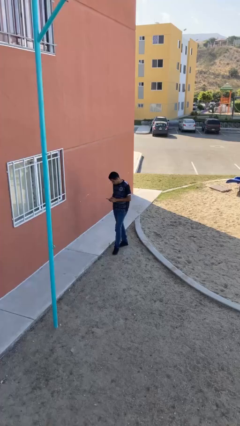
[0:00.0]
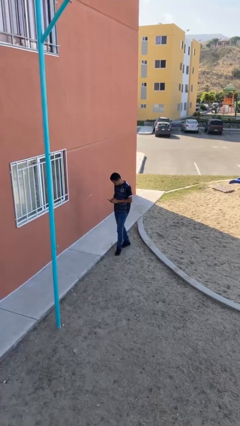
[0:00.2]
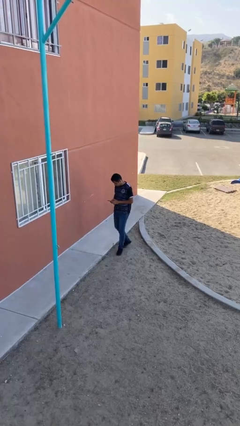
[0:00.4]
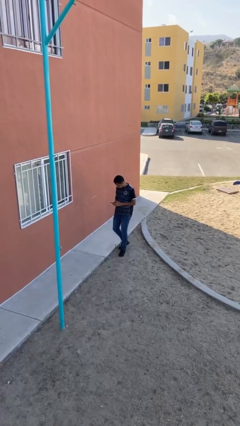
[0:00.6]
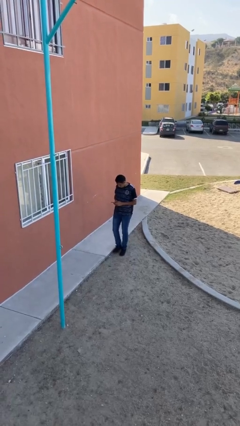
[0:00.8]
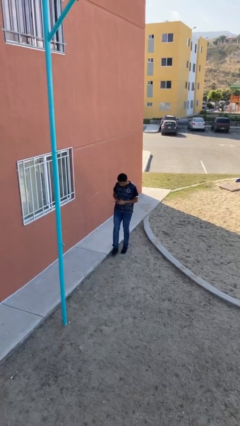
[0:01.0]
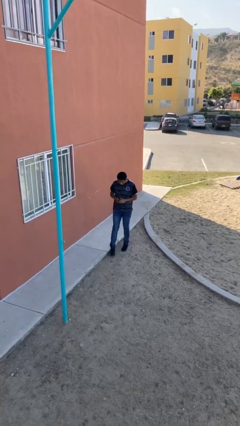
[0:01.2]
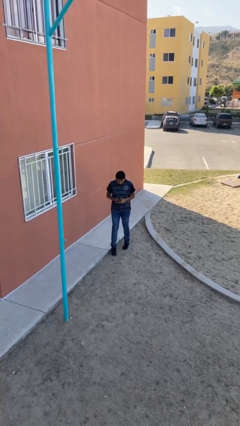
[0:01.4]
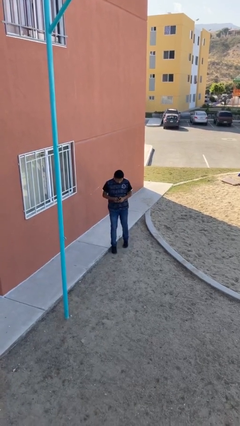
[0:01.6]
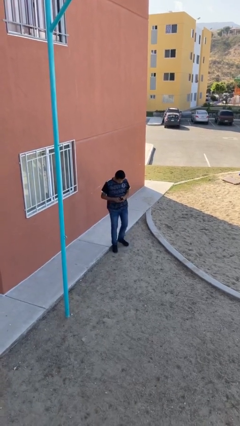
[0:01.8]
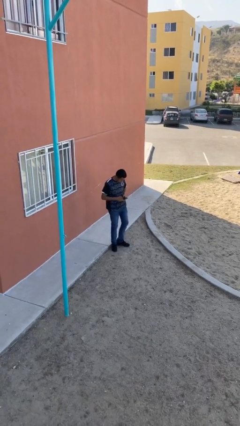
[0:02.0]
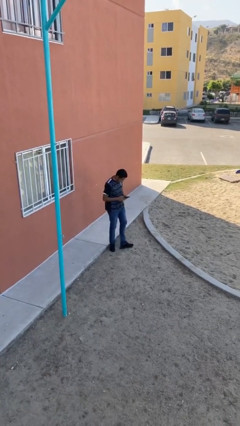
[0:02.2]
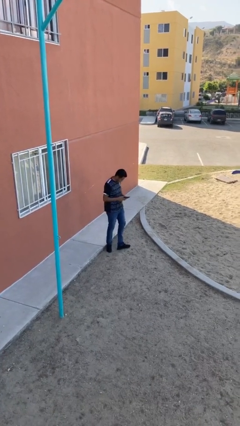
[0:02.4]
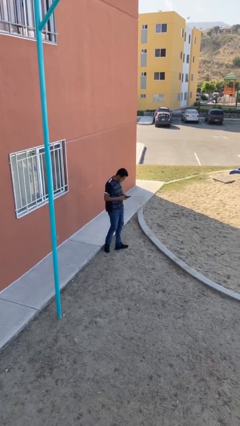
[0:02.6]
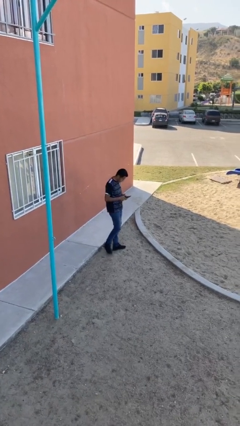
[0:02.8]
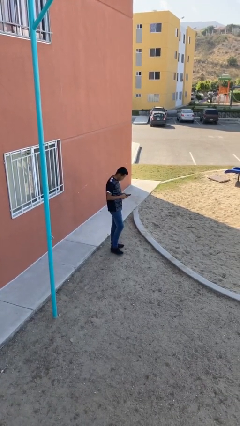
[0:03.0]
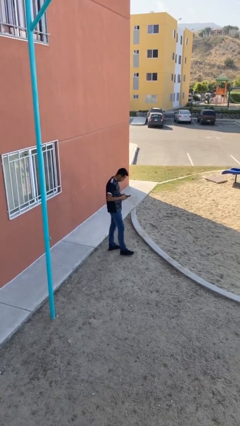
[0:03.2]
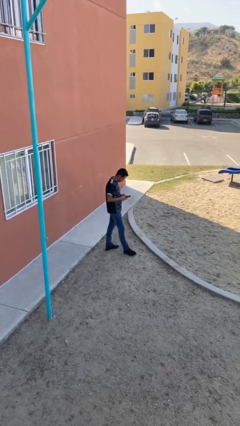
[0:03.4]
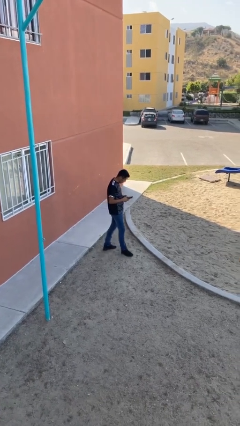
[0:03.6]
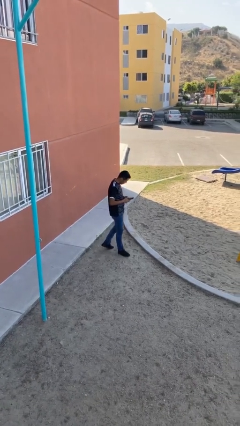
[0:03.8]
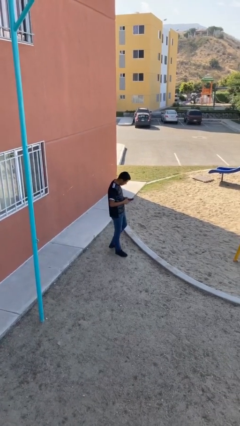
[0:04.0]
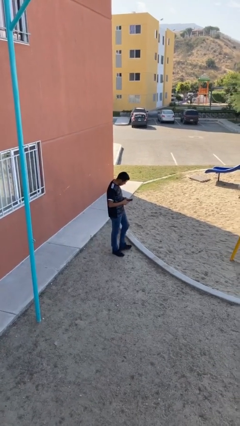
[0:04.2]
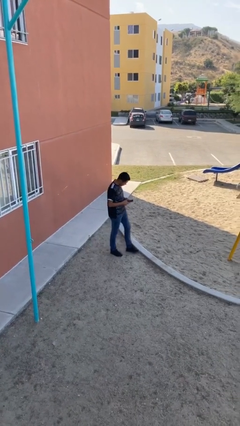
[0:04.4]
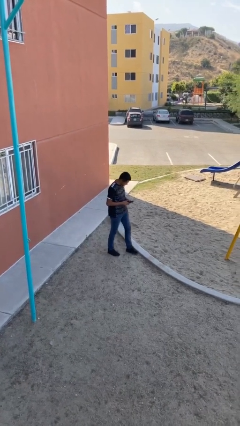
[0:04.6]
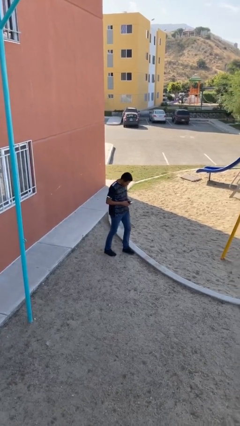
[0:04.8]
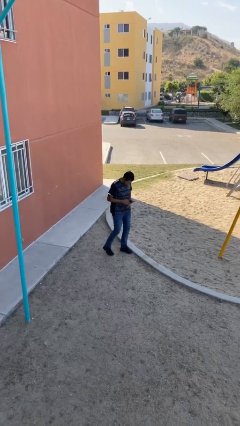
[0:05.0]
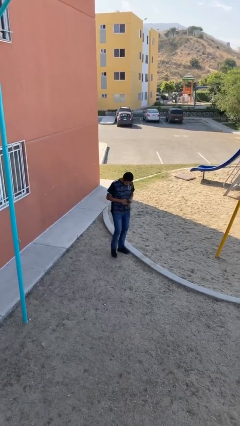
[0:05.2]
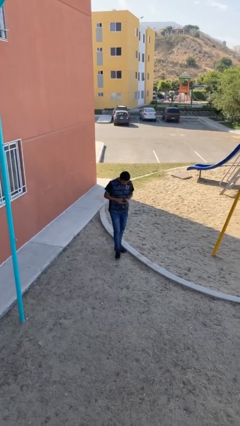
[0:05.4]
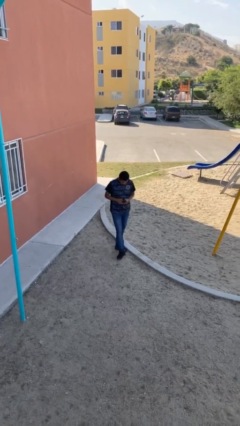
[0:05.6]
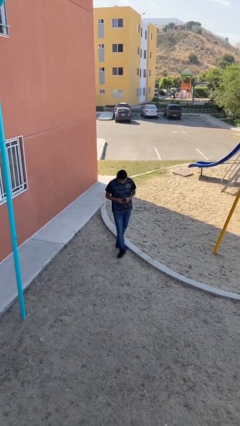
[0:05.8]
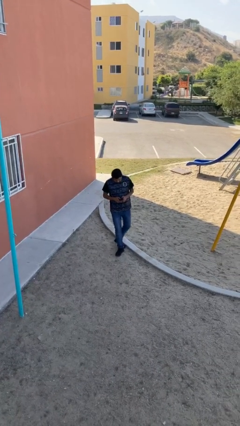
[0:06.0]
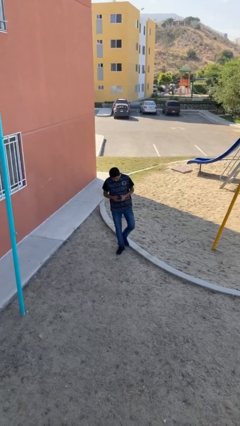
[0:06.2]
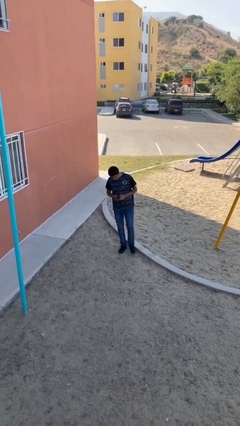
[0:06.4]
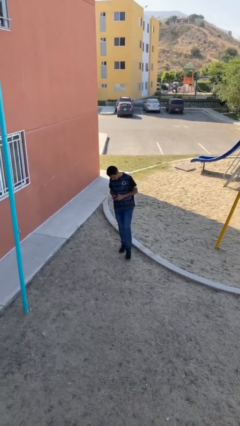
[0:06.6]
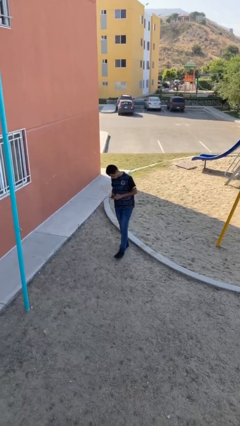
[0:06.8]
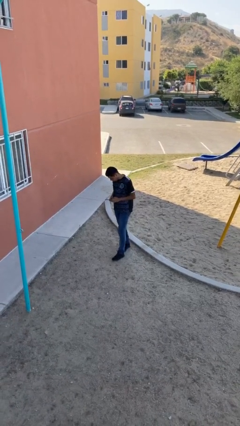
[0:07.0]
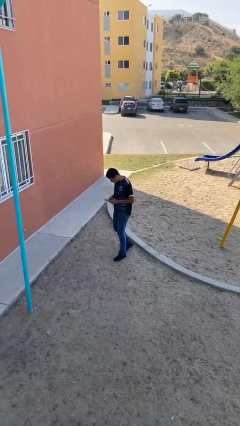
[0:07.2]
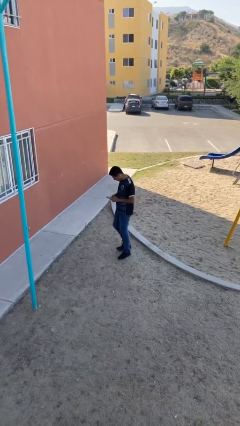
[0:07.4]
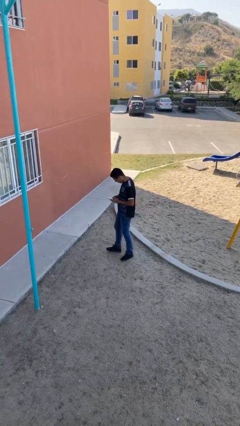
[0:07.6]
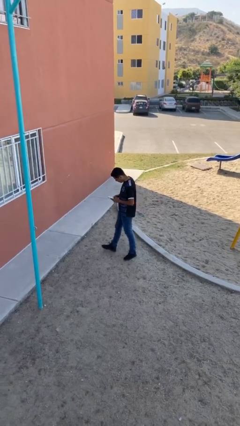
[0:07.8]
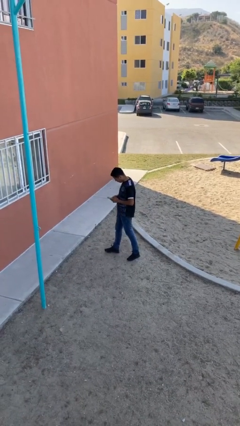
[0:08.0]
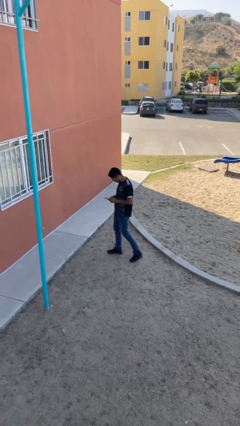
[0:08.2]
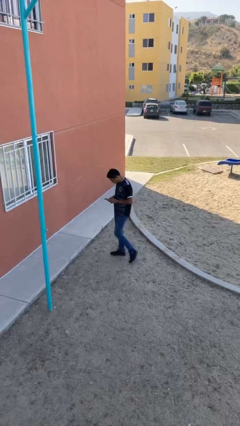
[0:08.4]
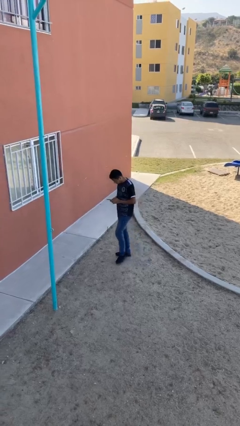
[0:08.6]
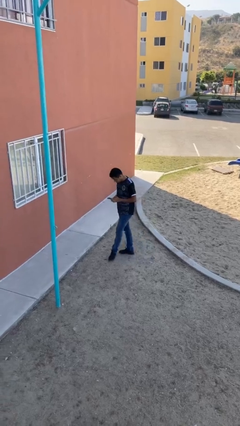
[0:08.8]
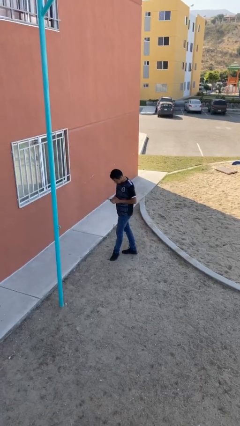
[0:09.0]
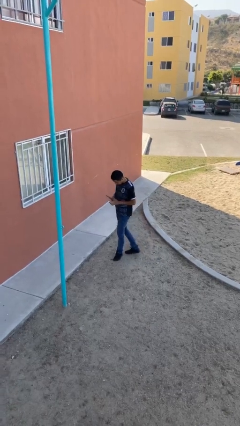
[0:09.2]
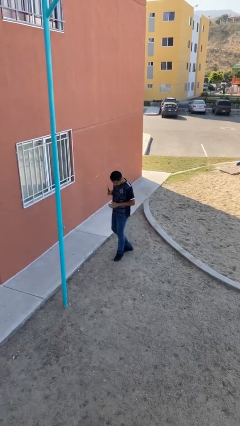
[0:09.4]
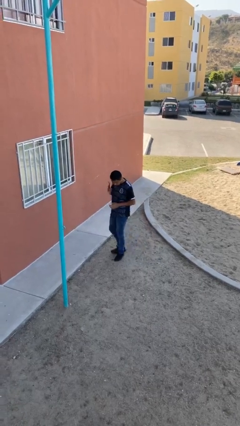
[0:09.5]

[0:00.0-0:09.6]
person texts on phone

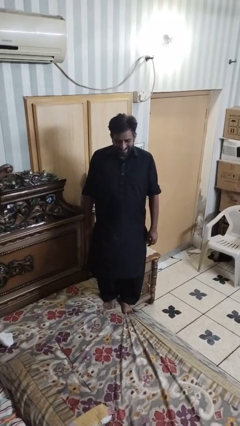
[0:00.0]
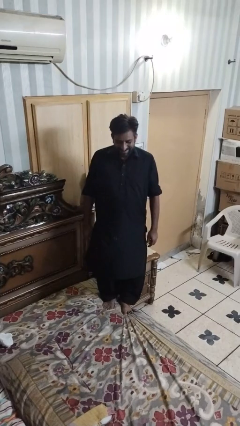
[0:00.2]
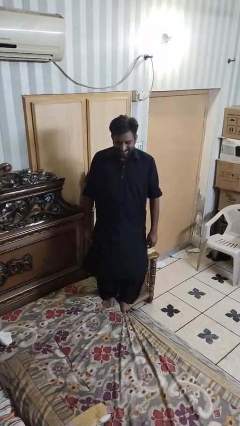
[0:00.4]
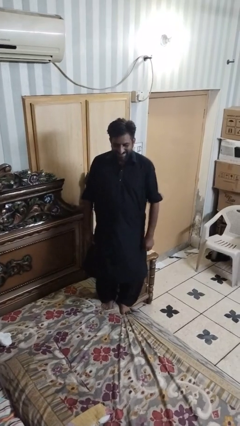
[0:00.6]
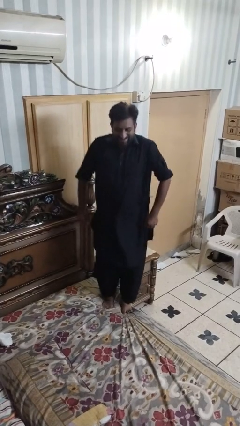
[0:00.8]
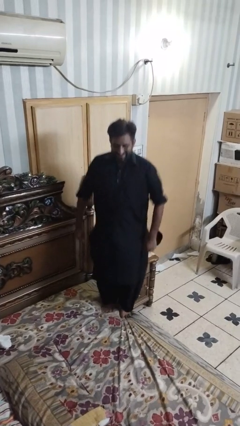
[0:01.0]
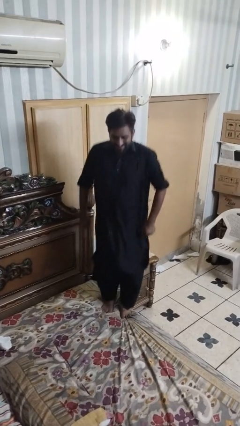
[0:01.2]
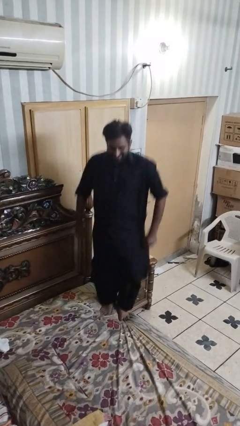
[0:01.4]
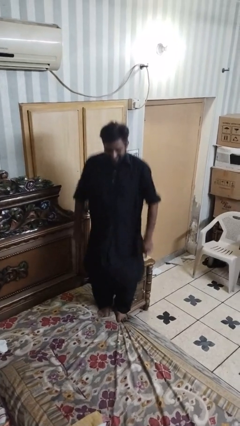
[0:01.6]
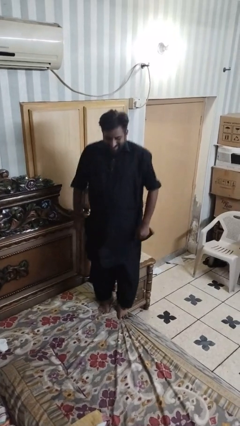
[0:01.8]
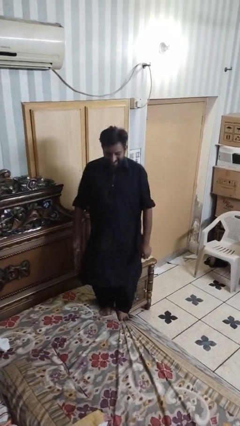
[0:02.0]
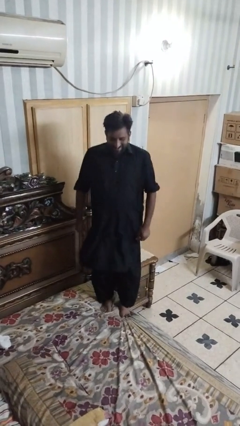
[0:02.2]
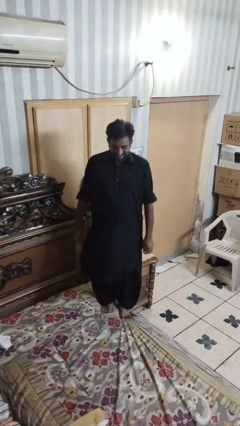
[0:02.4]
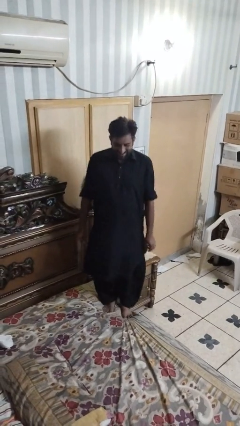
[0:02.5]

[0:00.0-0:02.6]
person jumps on bed

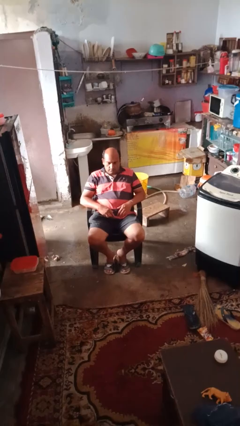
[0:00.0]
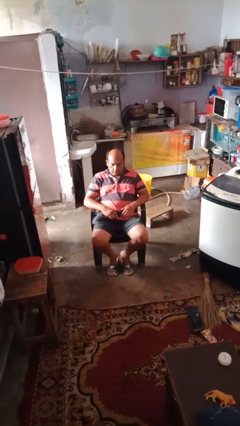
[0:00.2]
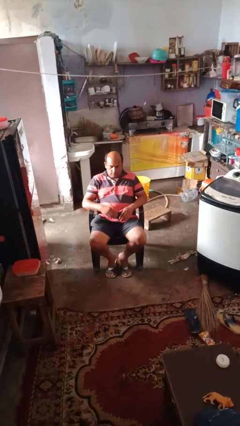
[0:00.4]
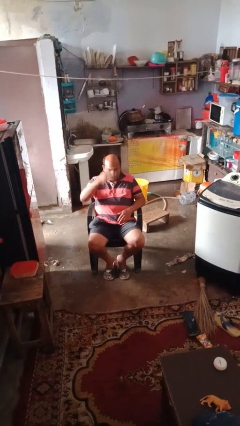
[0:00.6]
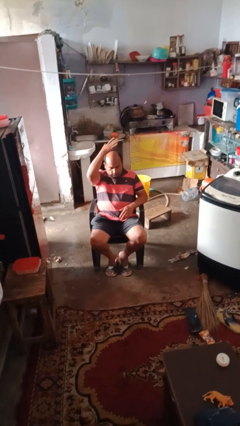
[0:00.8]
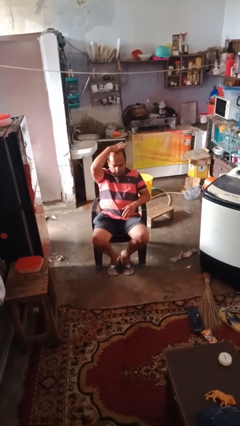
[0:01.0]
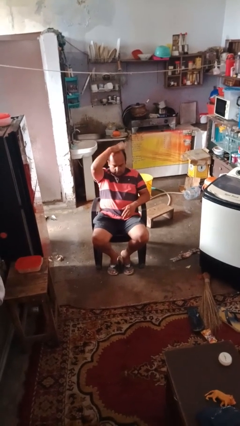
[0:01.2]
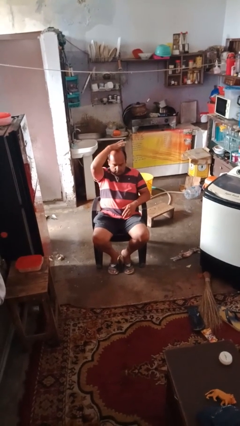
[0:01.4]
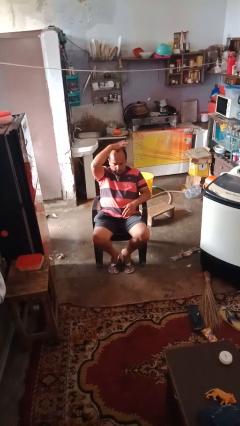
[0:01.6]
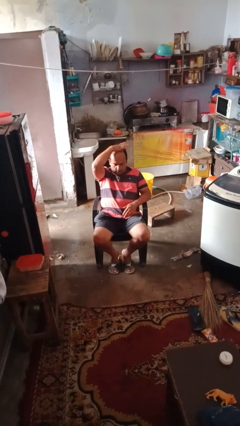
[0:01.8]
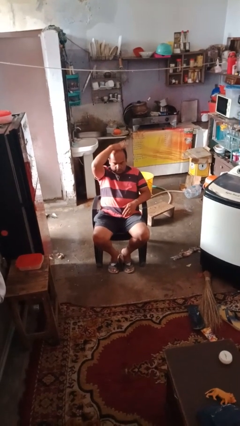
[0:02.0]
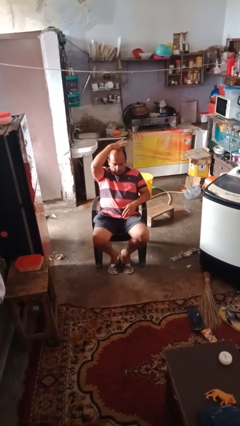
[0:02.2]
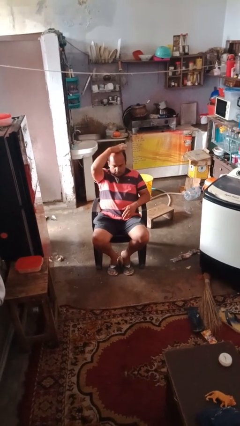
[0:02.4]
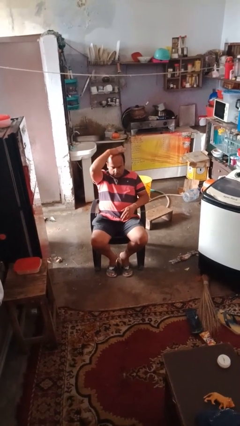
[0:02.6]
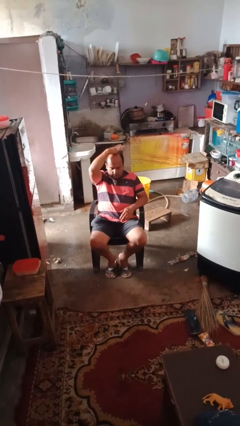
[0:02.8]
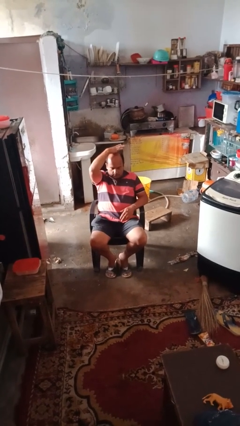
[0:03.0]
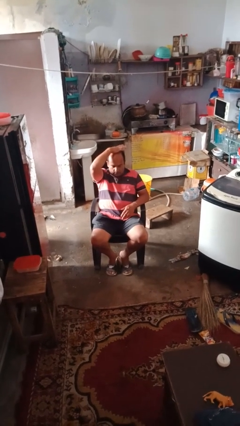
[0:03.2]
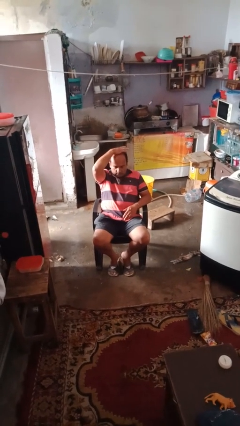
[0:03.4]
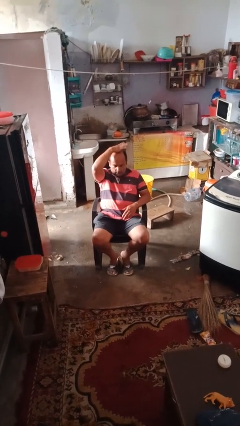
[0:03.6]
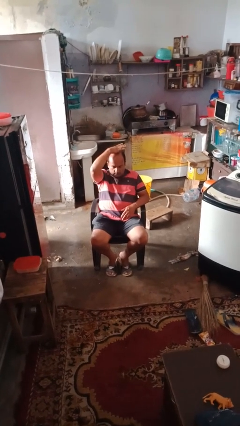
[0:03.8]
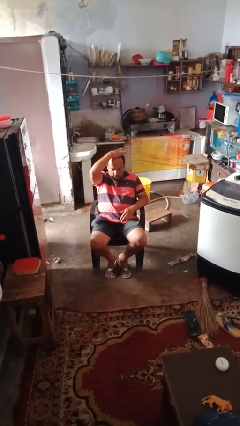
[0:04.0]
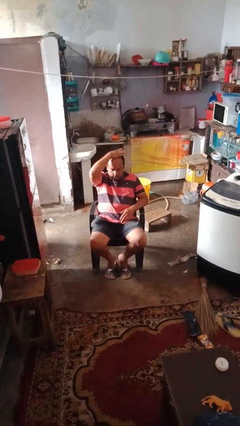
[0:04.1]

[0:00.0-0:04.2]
person holds object above head

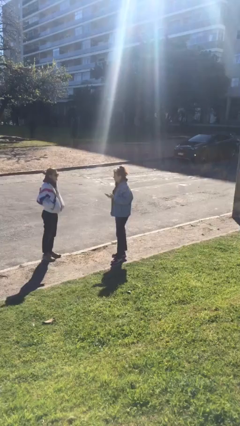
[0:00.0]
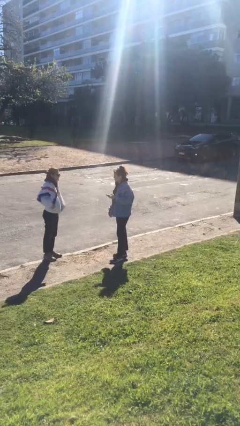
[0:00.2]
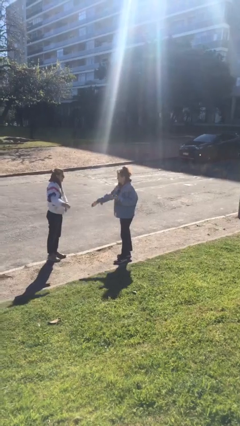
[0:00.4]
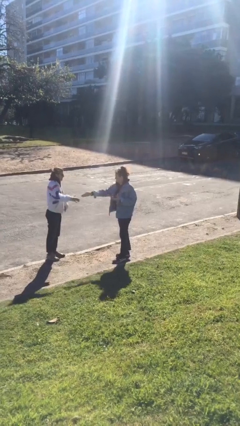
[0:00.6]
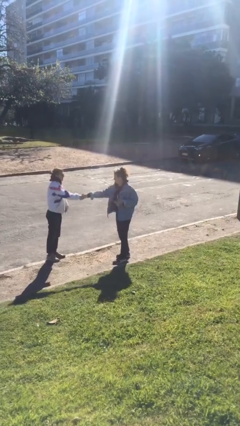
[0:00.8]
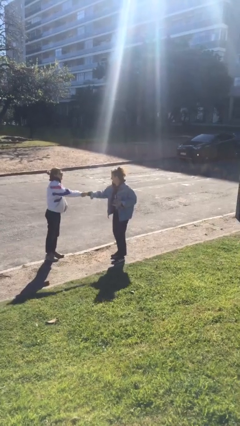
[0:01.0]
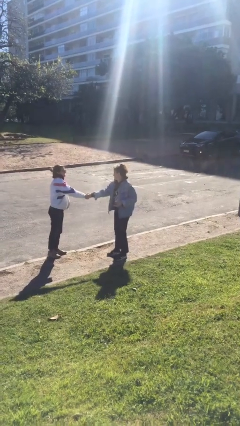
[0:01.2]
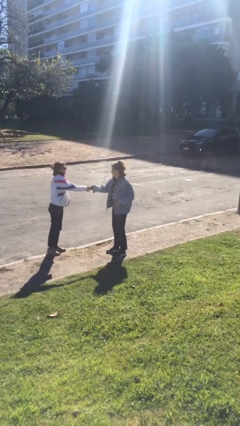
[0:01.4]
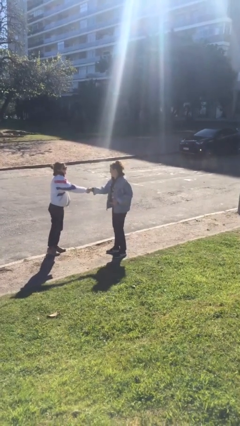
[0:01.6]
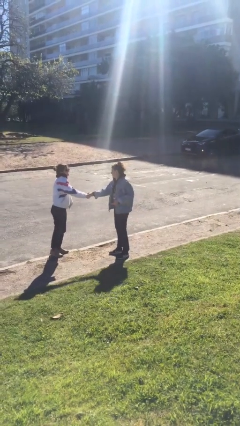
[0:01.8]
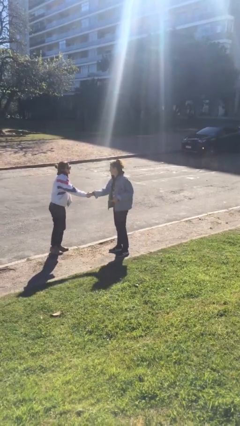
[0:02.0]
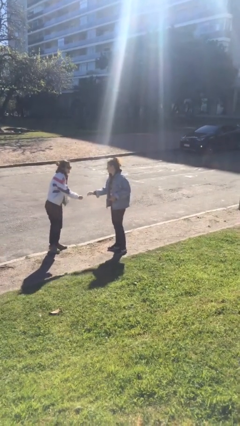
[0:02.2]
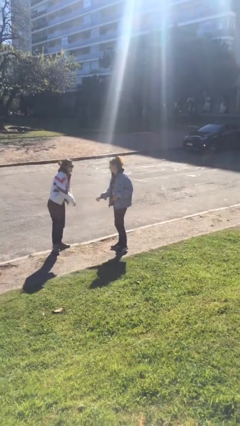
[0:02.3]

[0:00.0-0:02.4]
person shakes hand
